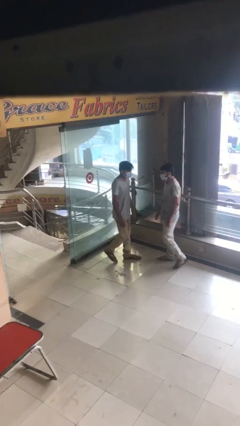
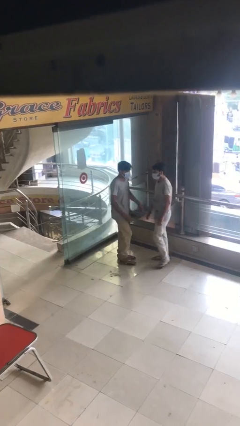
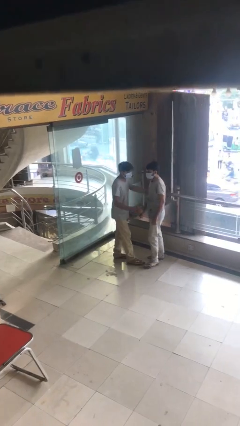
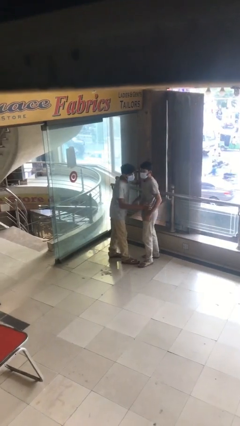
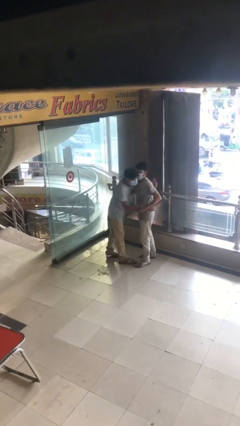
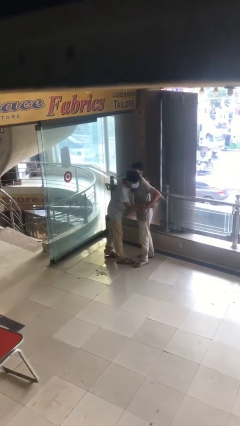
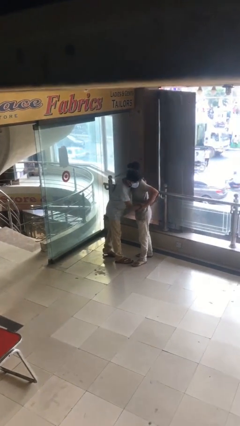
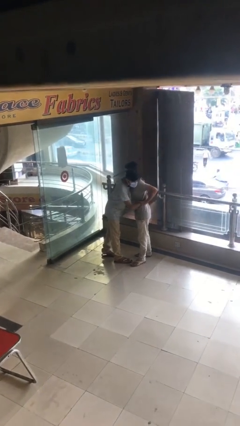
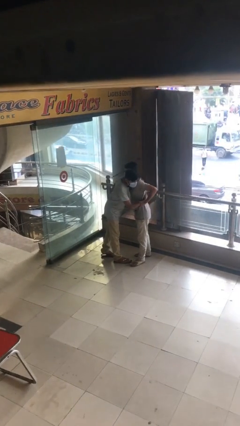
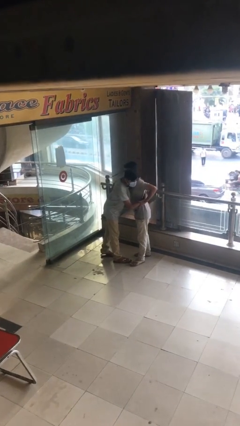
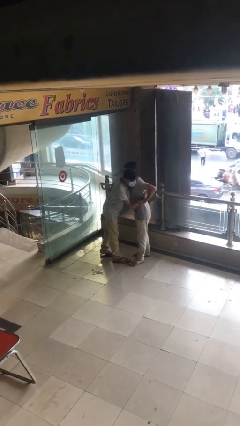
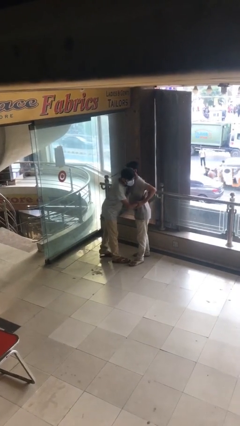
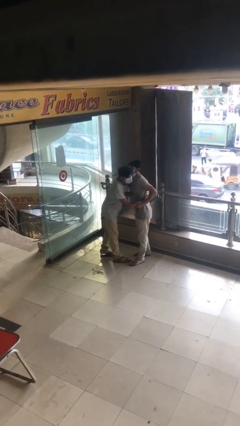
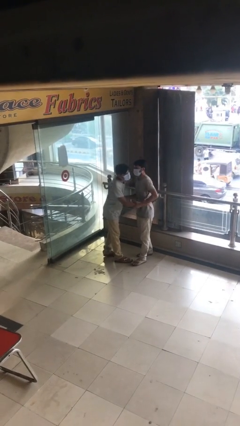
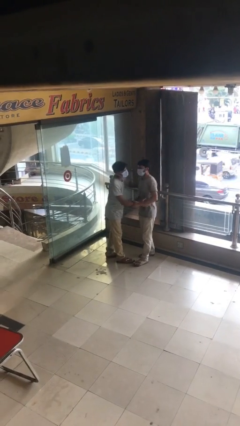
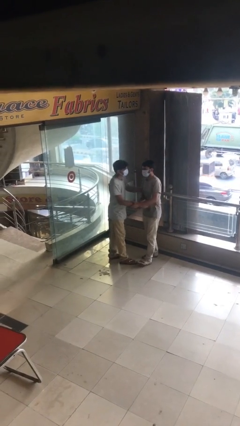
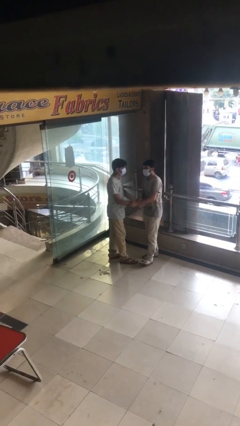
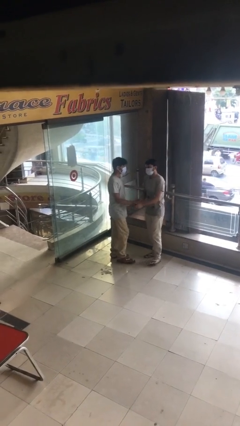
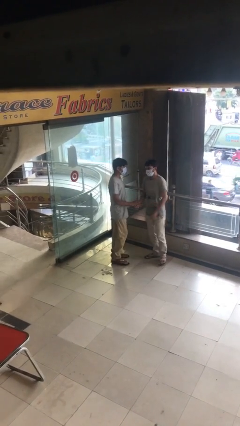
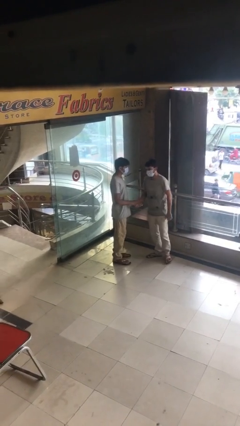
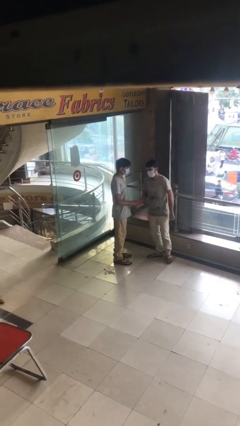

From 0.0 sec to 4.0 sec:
person embraces person

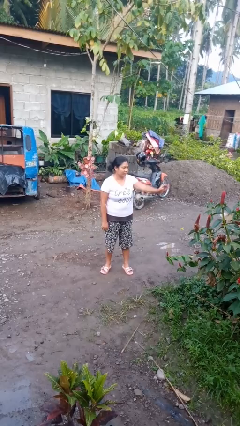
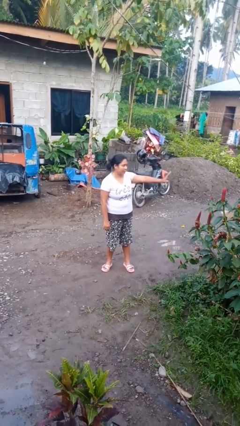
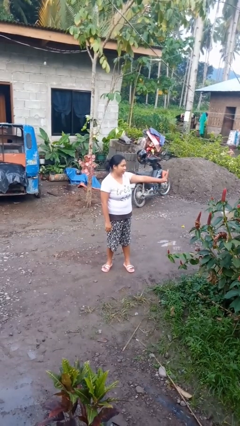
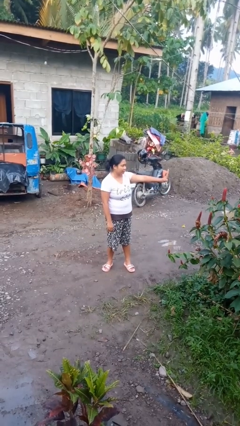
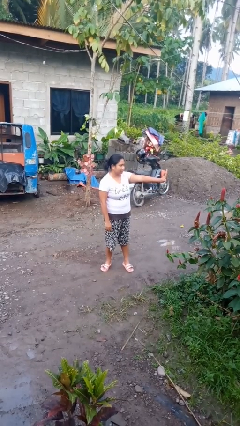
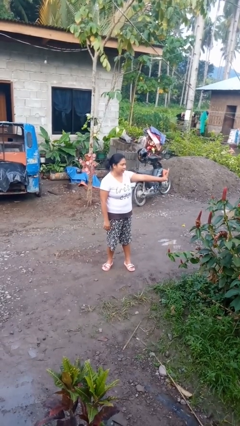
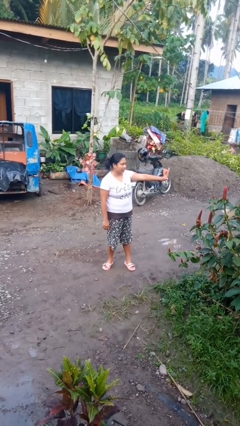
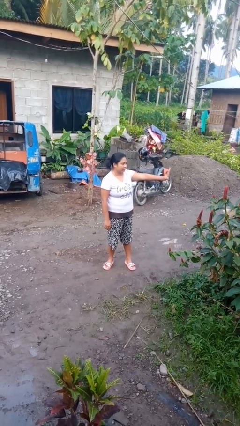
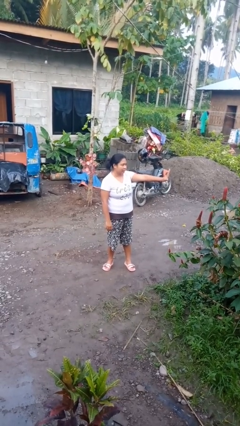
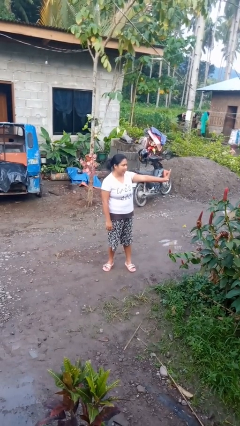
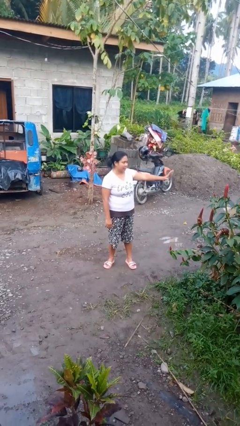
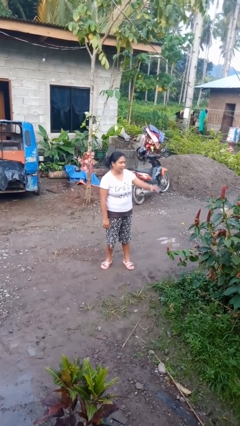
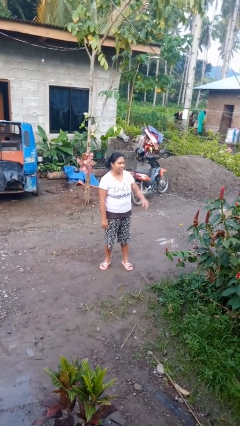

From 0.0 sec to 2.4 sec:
person gestures number five

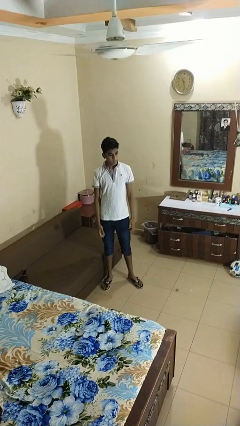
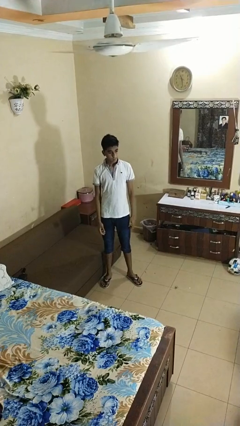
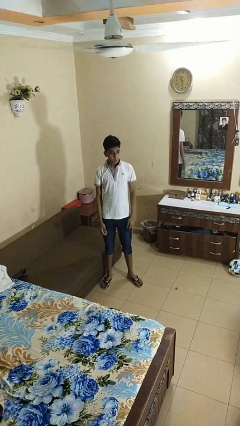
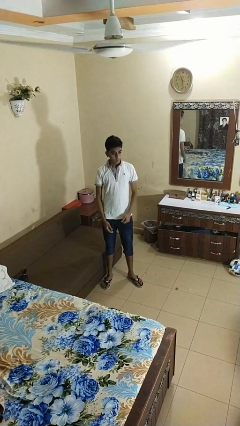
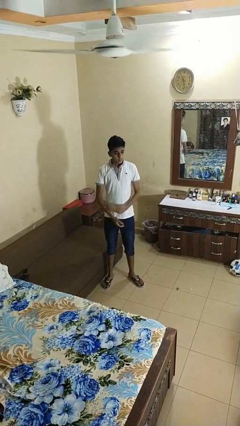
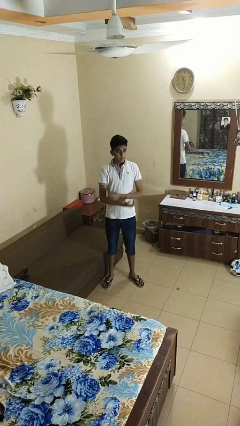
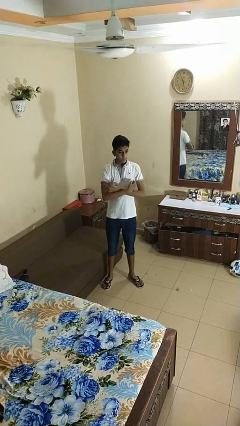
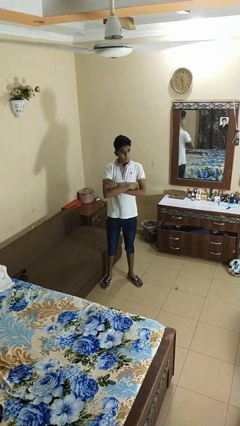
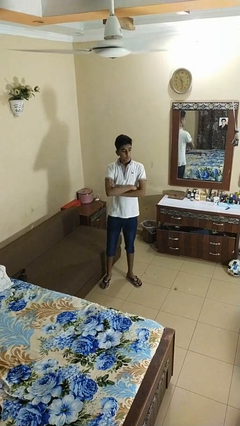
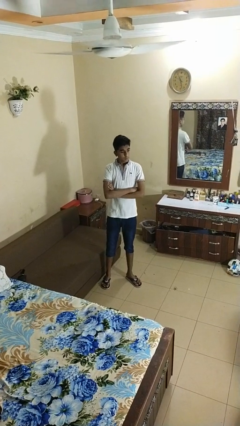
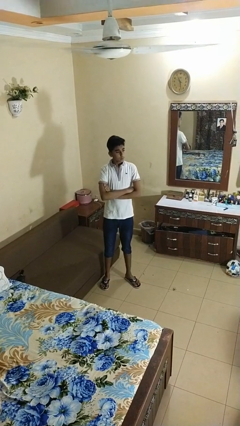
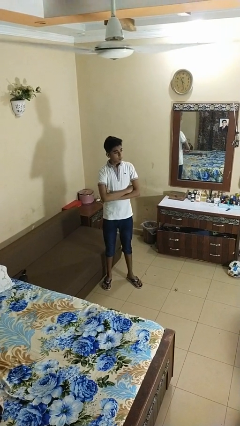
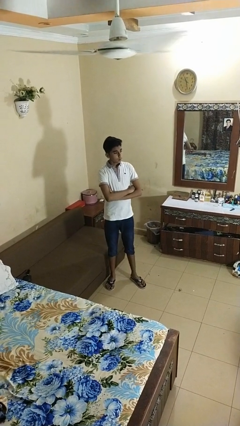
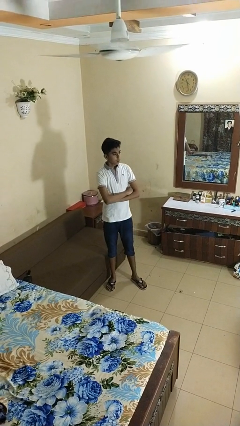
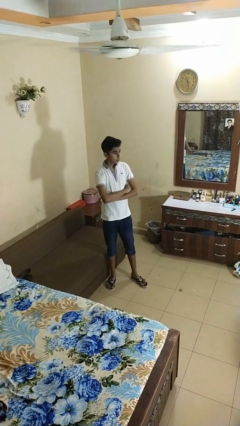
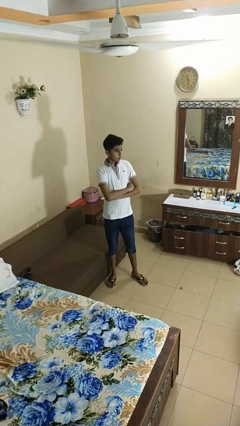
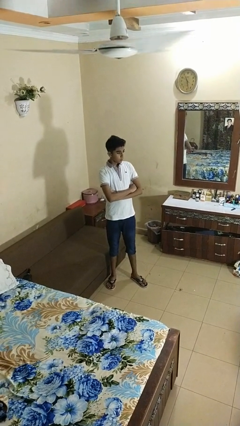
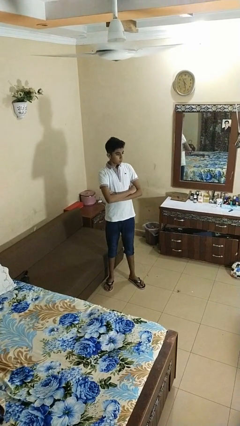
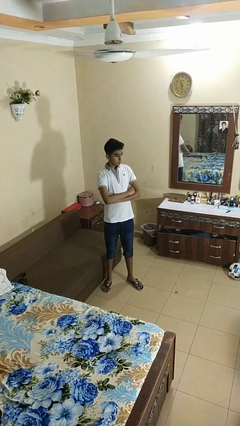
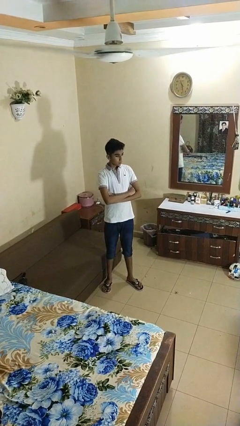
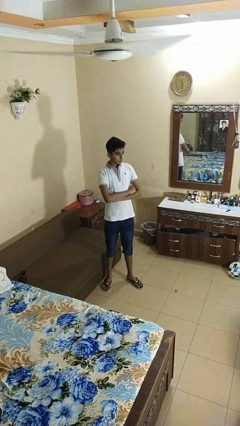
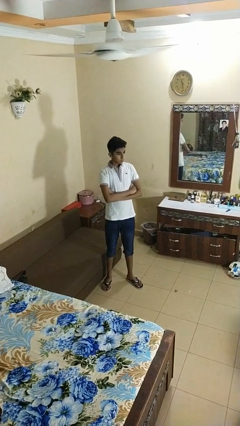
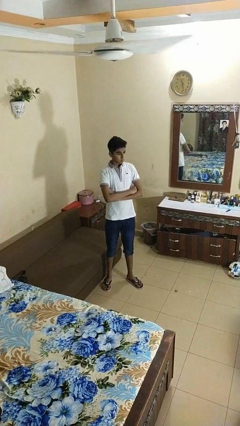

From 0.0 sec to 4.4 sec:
person crosses arms

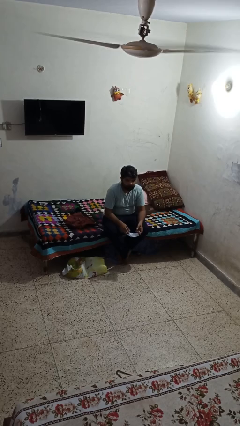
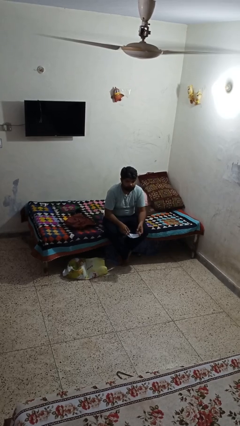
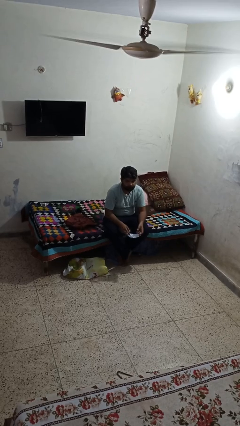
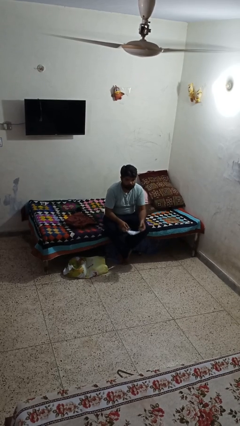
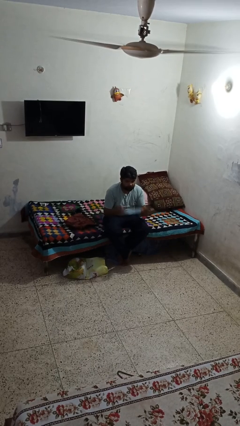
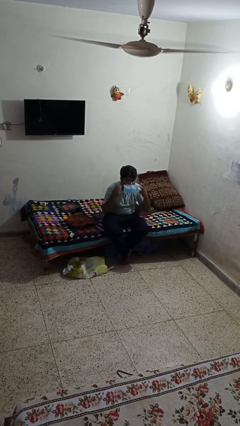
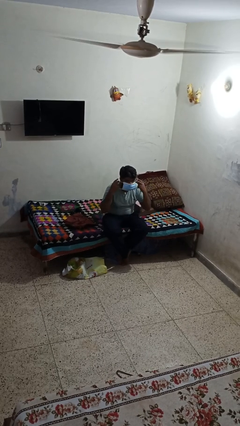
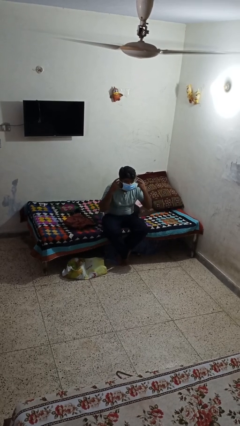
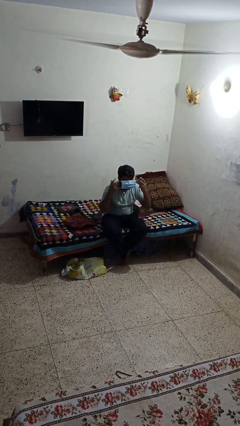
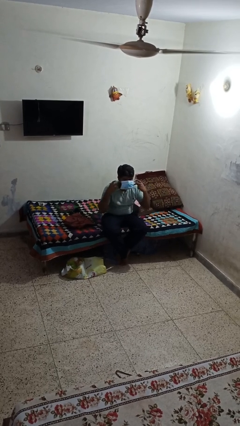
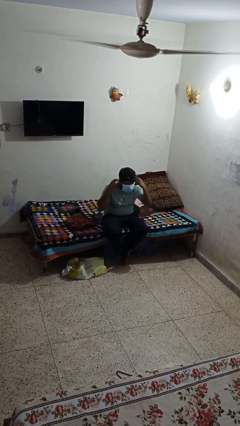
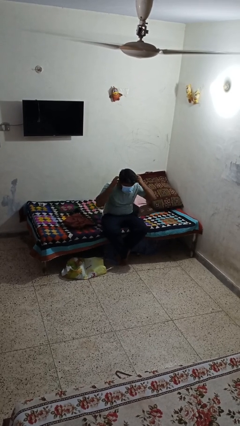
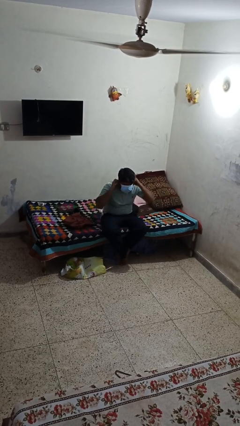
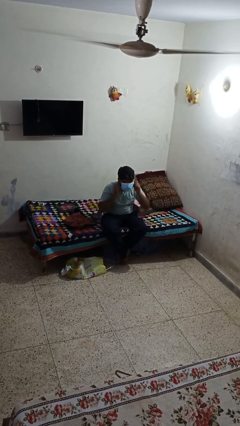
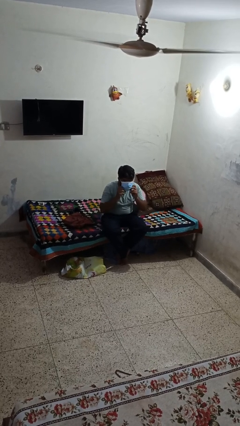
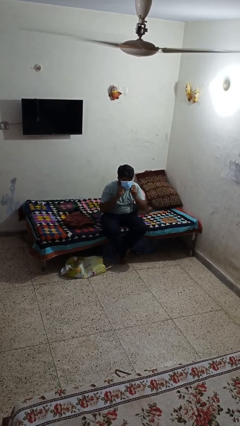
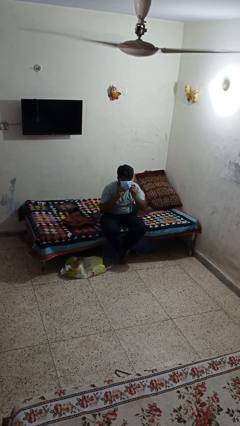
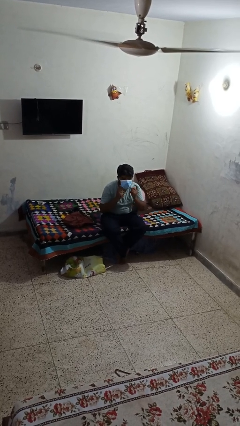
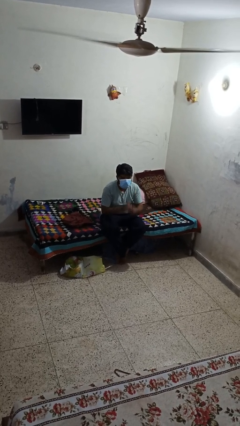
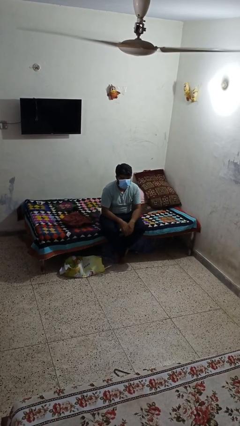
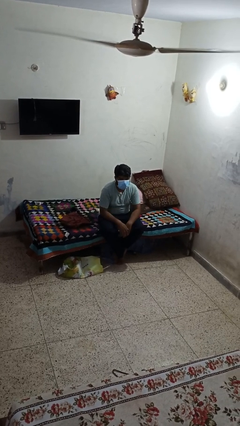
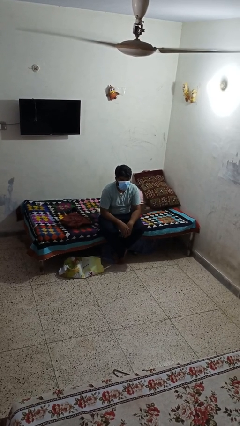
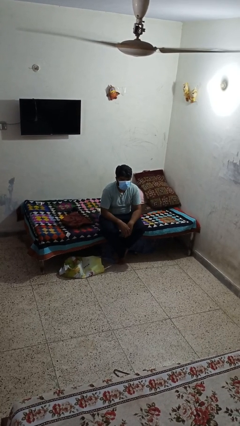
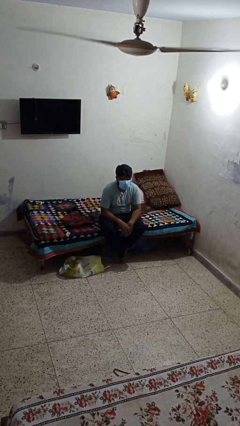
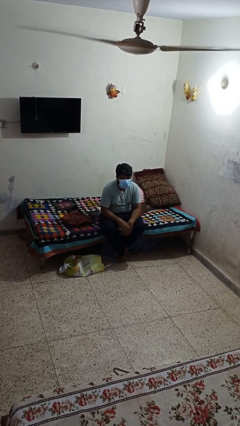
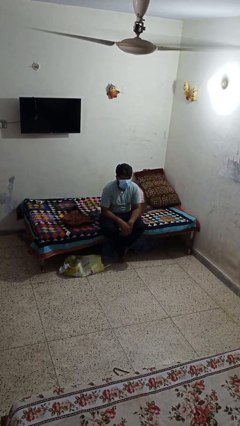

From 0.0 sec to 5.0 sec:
person puts on facemask

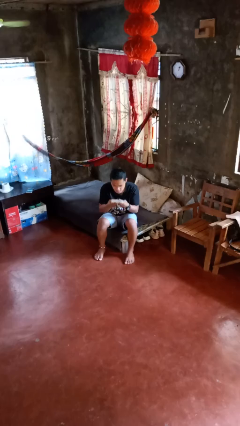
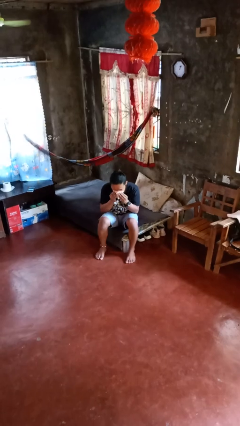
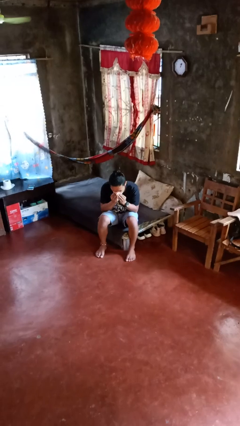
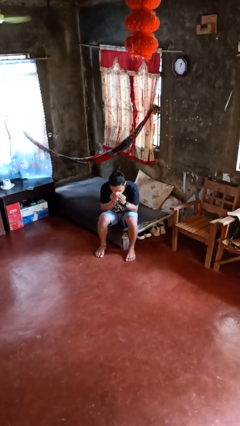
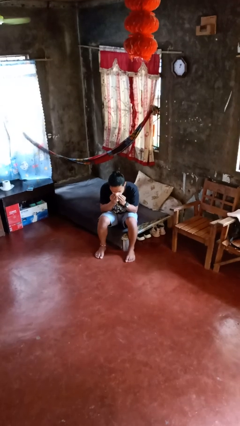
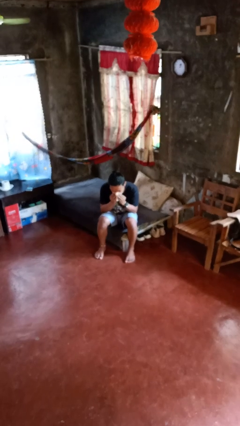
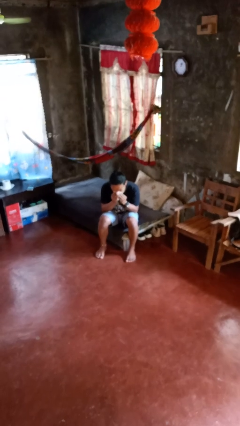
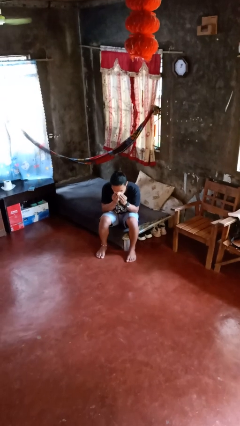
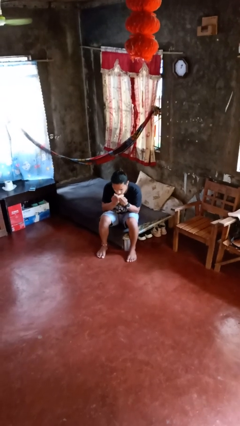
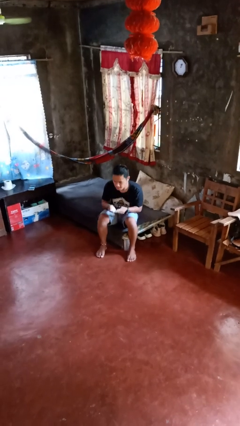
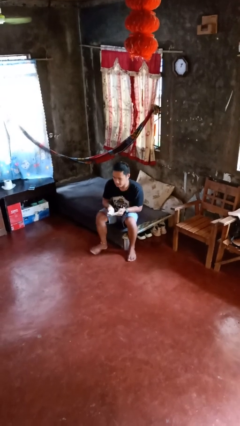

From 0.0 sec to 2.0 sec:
person blows nose
